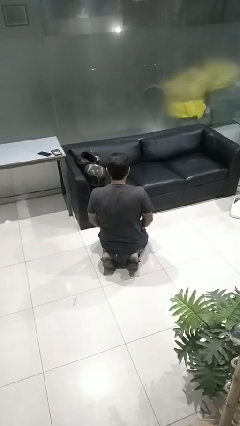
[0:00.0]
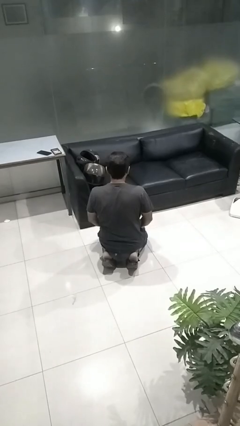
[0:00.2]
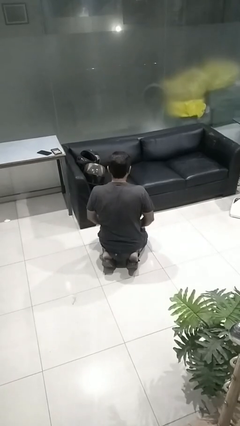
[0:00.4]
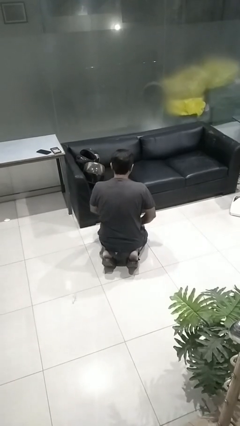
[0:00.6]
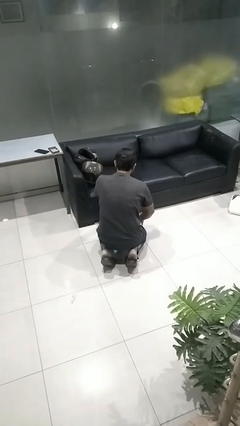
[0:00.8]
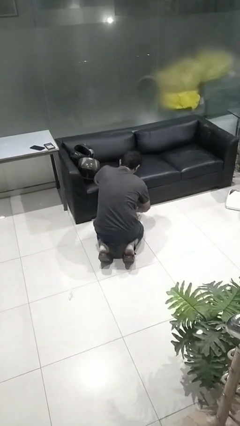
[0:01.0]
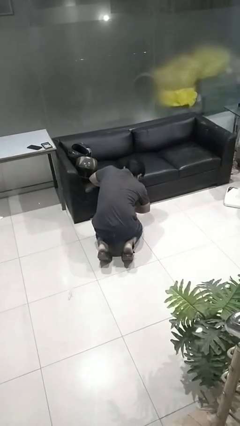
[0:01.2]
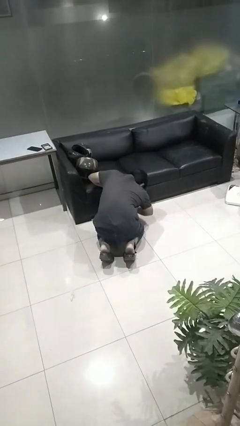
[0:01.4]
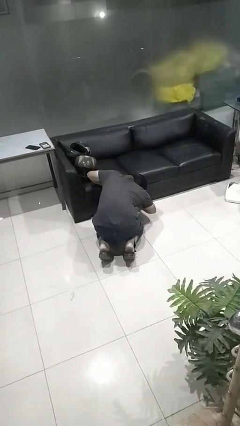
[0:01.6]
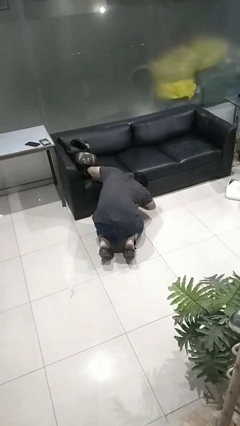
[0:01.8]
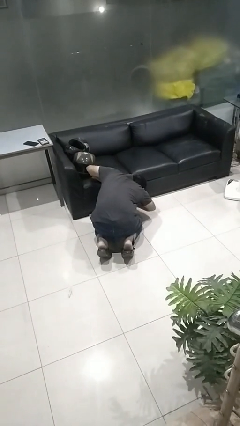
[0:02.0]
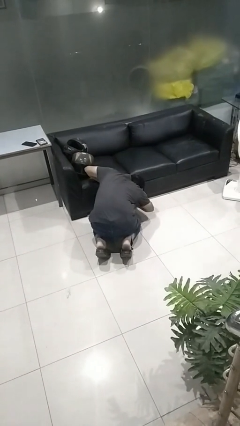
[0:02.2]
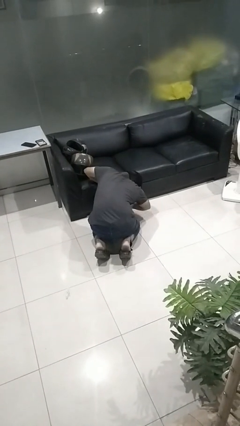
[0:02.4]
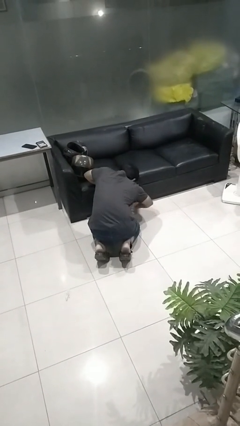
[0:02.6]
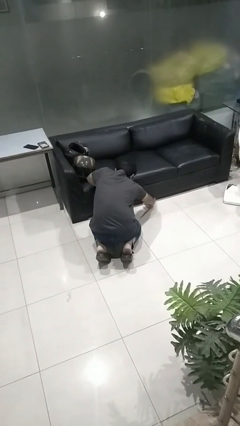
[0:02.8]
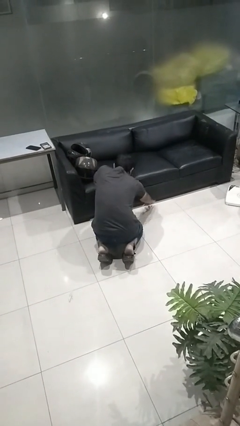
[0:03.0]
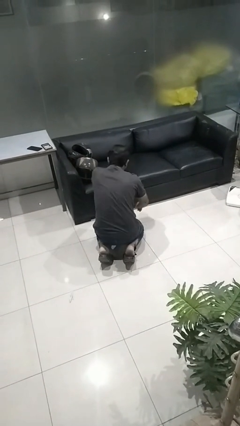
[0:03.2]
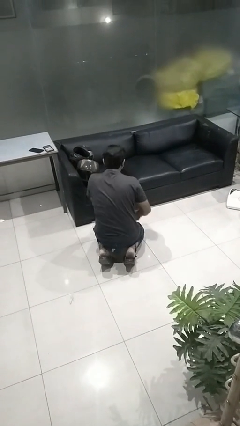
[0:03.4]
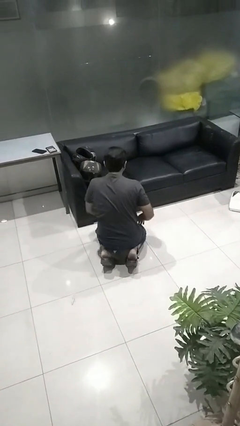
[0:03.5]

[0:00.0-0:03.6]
person searches under couch

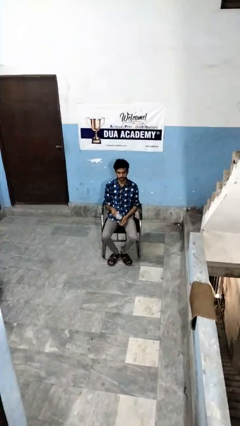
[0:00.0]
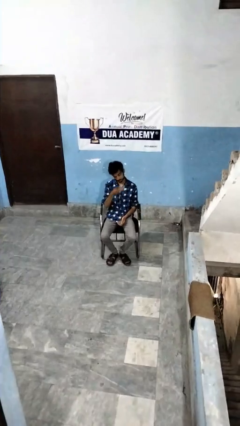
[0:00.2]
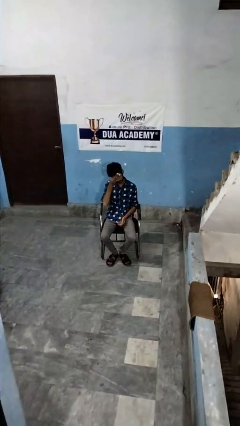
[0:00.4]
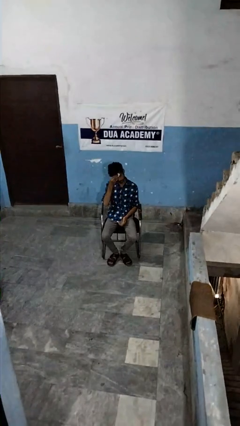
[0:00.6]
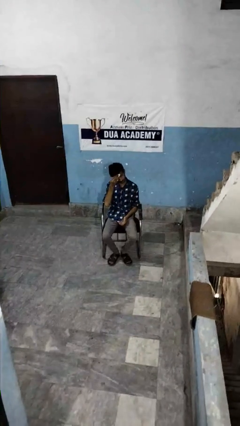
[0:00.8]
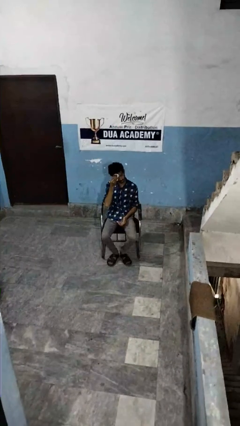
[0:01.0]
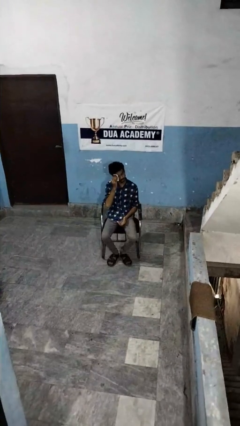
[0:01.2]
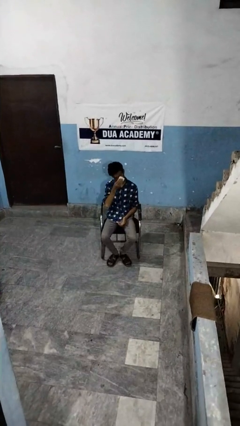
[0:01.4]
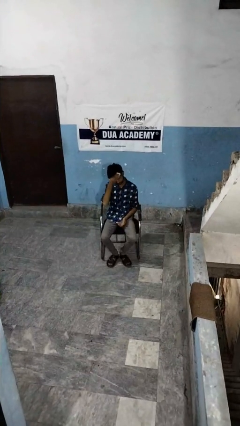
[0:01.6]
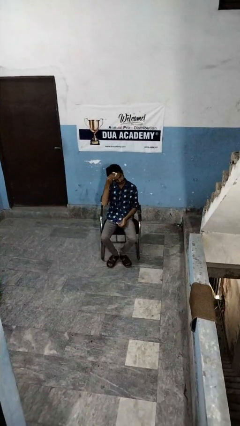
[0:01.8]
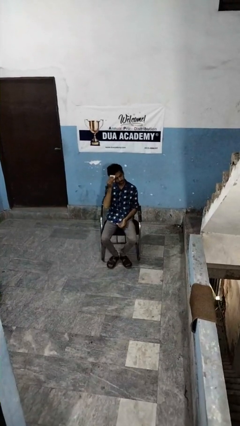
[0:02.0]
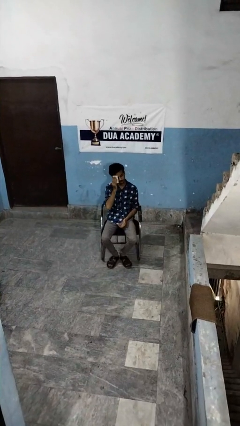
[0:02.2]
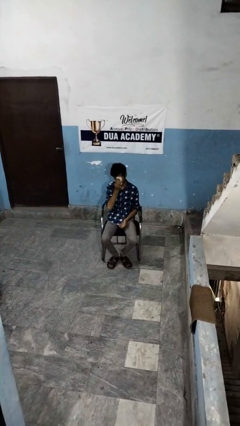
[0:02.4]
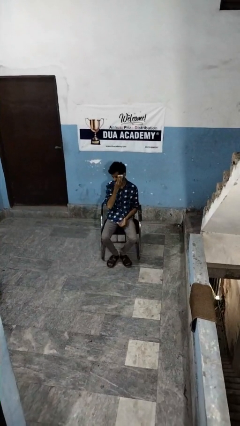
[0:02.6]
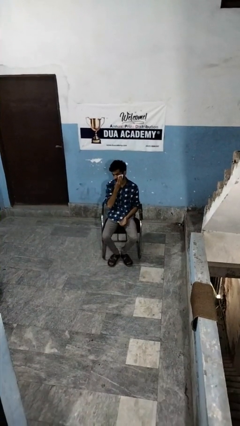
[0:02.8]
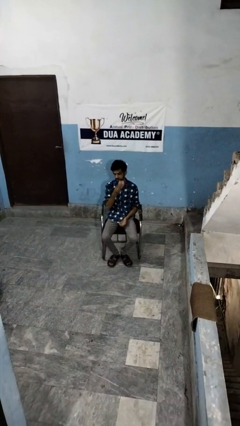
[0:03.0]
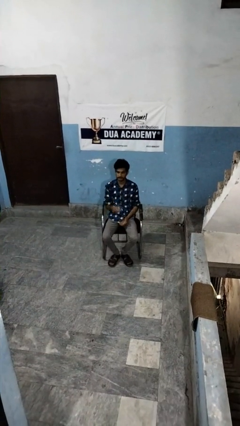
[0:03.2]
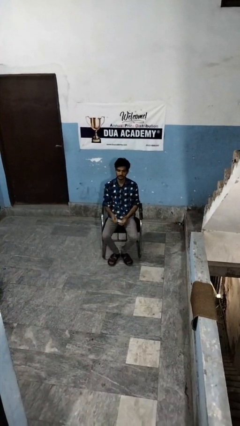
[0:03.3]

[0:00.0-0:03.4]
person wipes mouth with napkin

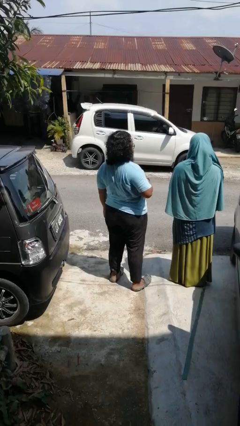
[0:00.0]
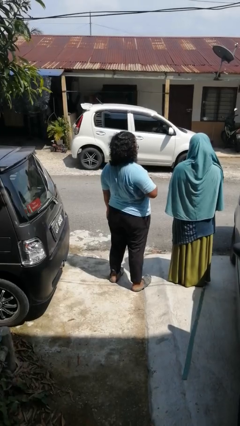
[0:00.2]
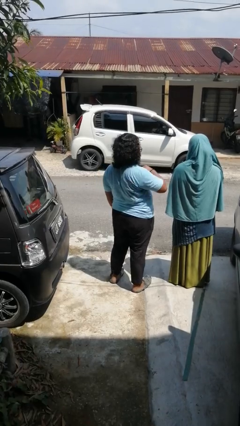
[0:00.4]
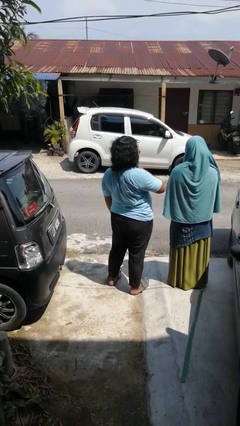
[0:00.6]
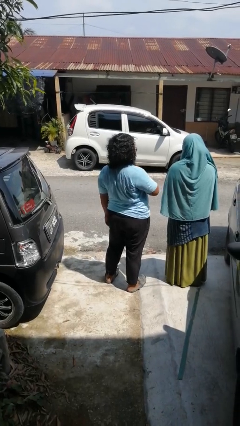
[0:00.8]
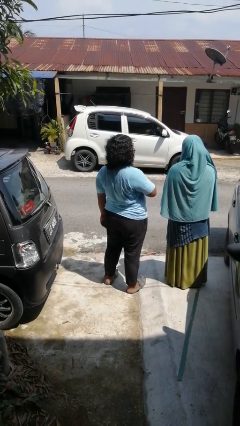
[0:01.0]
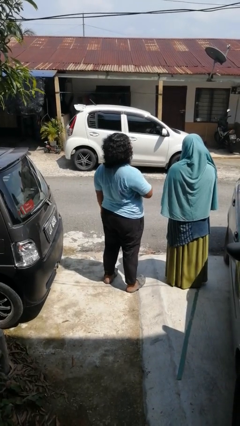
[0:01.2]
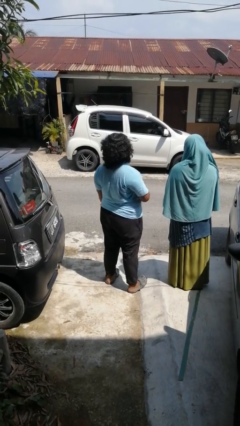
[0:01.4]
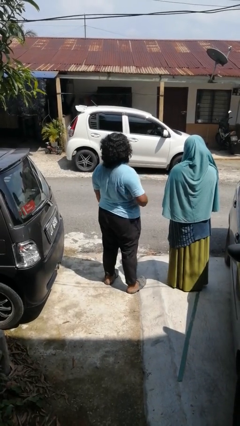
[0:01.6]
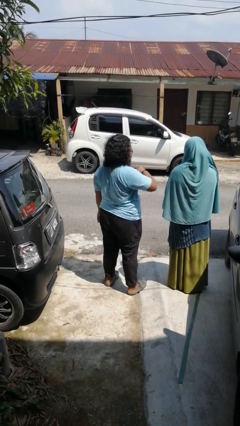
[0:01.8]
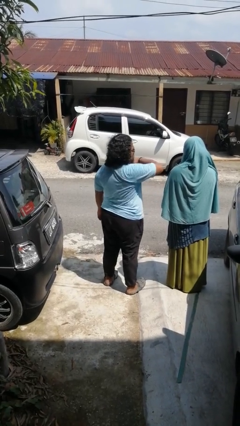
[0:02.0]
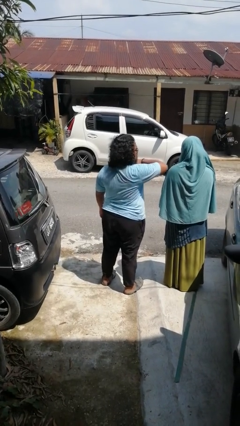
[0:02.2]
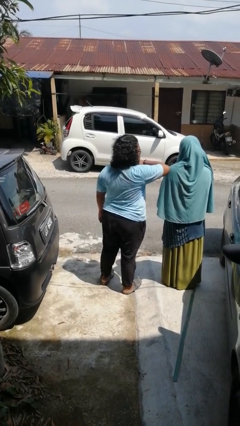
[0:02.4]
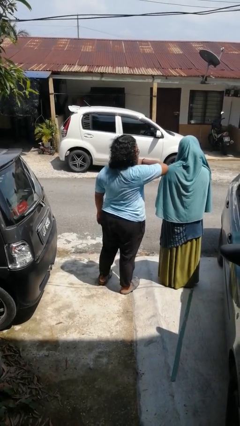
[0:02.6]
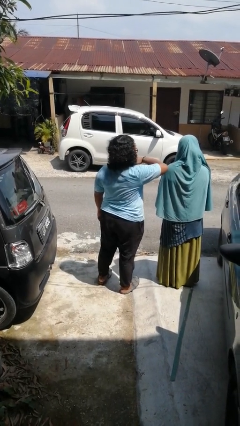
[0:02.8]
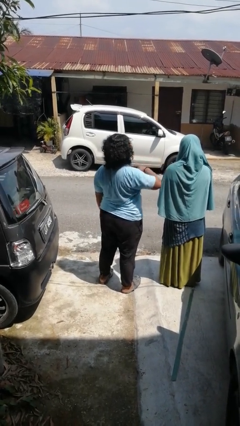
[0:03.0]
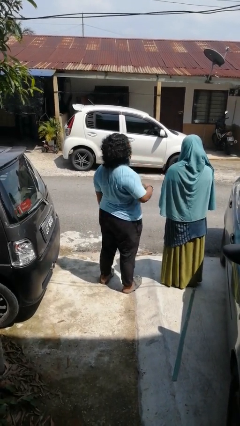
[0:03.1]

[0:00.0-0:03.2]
person nudges person with elbow

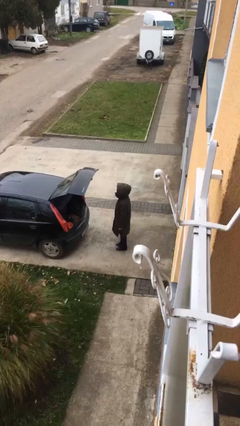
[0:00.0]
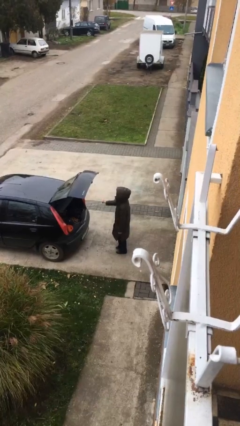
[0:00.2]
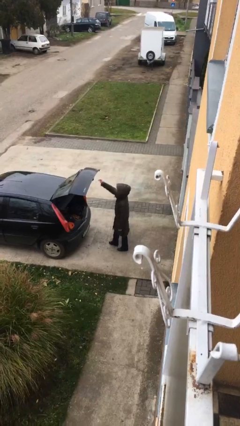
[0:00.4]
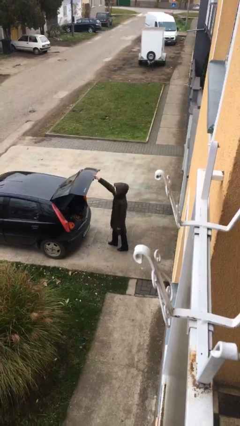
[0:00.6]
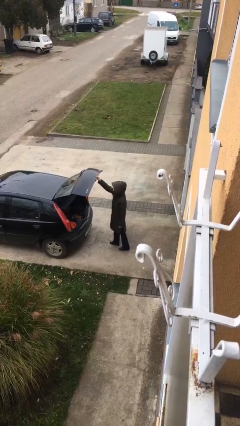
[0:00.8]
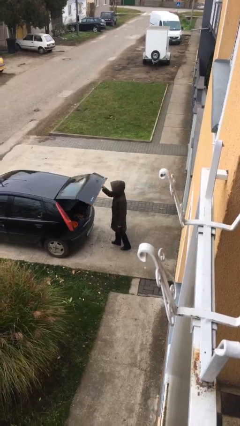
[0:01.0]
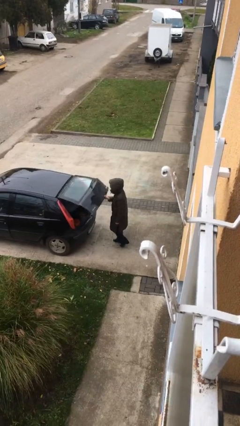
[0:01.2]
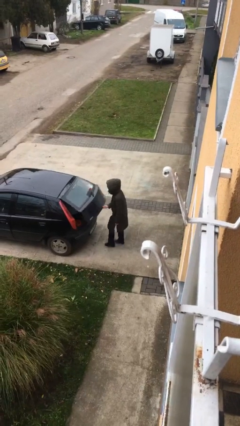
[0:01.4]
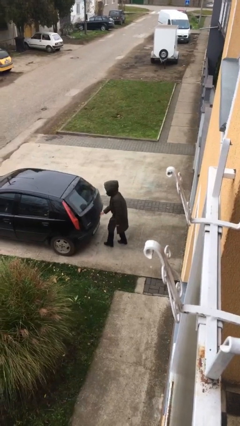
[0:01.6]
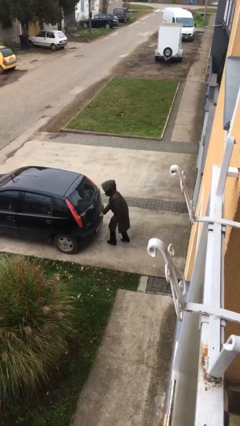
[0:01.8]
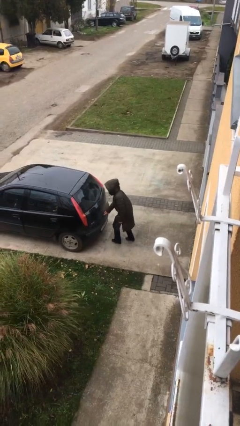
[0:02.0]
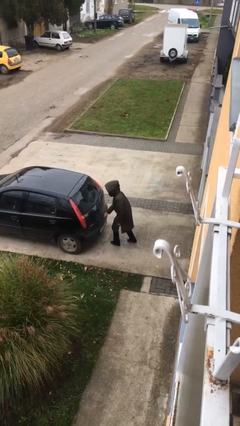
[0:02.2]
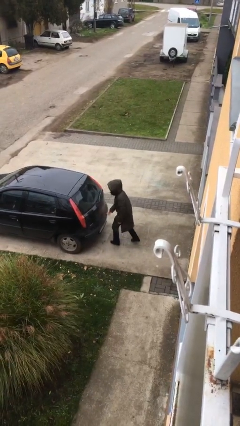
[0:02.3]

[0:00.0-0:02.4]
person closes car trunk

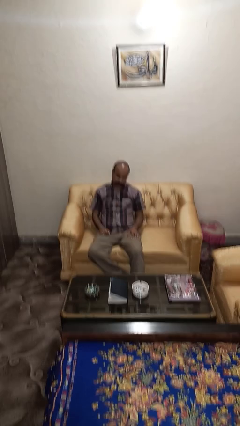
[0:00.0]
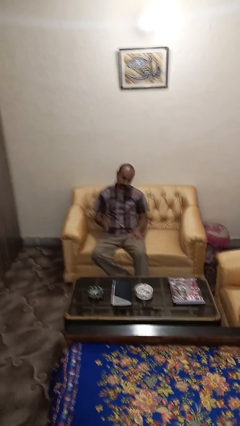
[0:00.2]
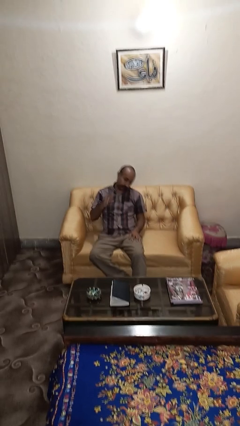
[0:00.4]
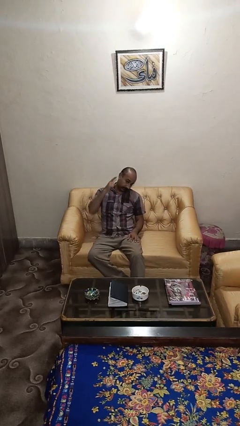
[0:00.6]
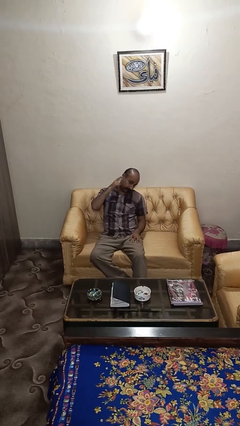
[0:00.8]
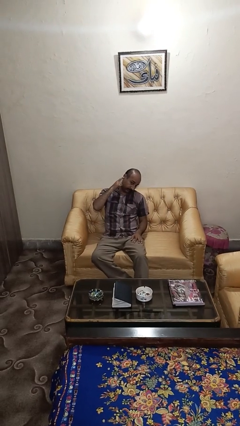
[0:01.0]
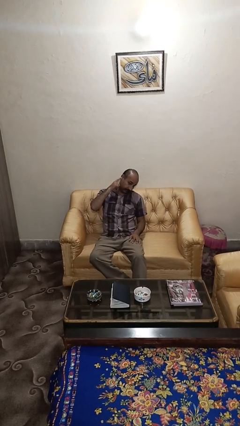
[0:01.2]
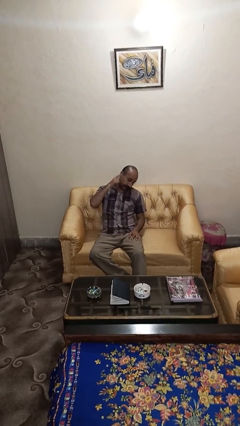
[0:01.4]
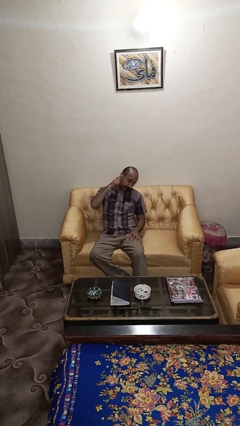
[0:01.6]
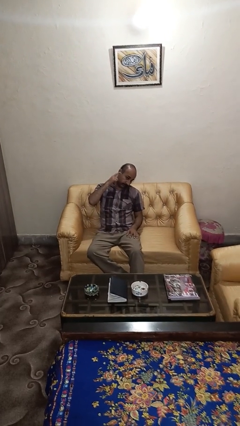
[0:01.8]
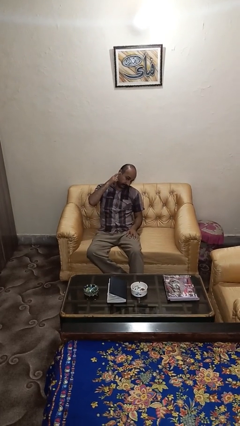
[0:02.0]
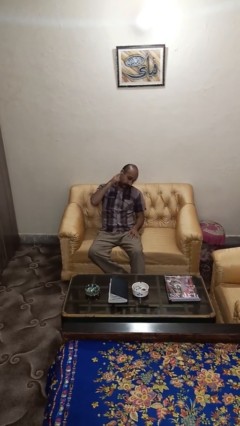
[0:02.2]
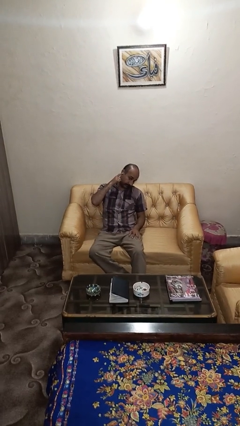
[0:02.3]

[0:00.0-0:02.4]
person gestures listen closely

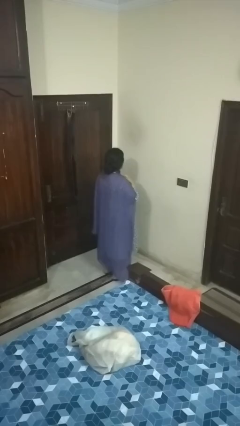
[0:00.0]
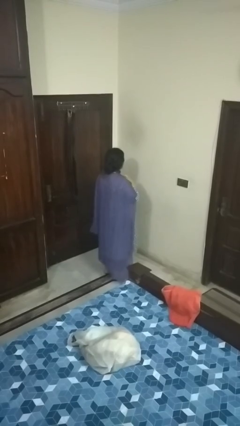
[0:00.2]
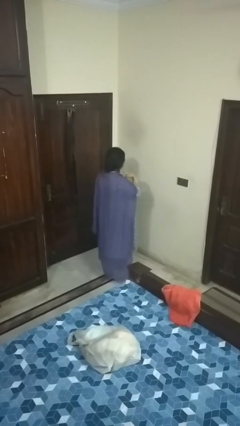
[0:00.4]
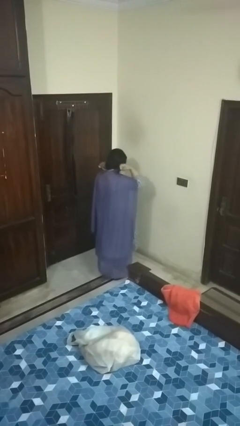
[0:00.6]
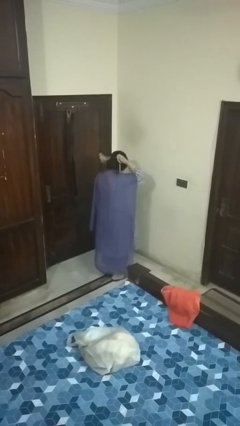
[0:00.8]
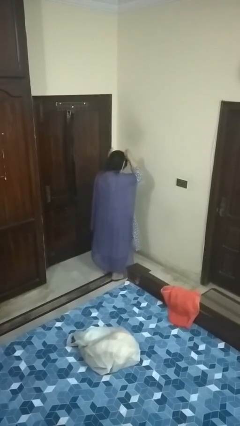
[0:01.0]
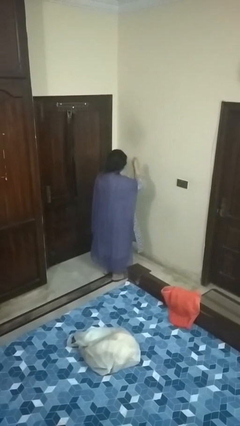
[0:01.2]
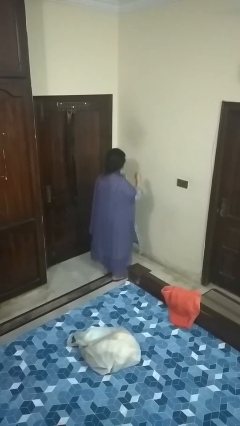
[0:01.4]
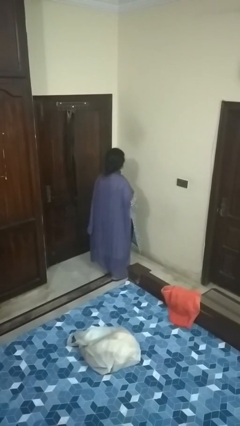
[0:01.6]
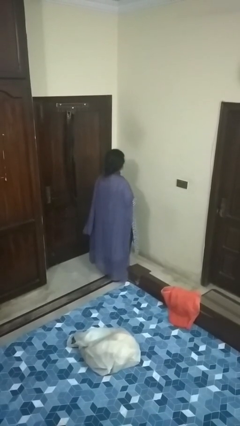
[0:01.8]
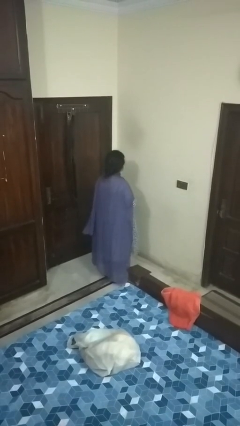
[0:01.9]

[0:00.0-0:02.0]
person takes off necklace

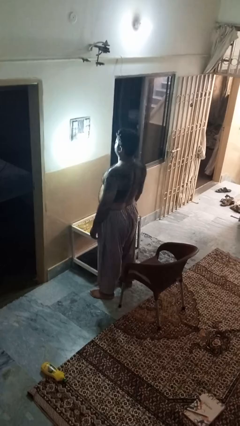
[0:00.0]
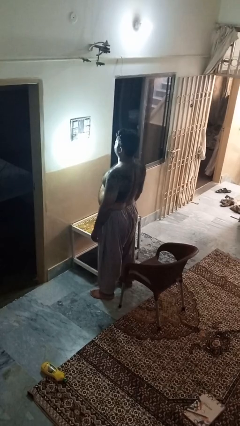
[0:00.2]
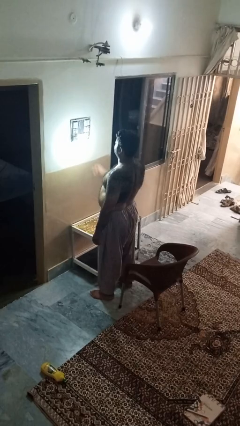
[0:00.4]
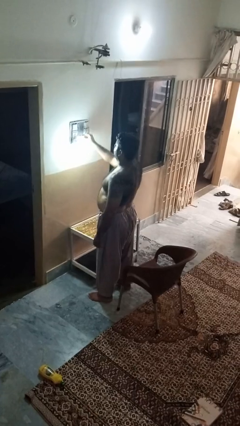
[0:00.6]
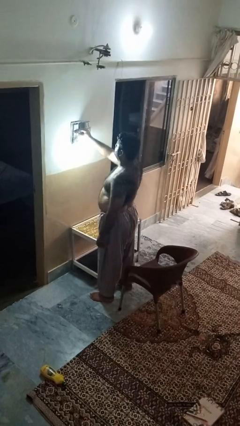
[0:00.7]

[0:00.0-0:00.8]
person turns off lamp
